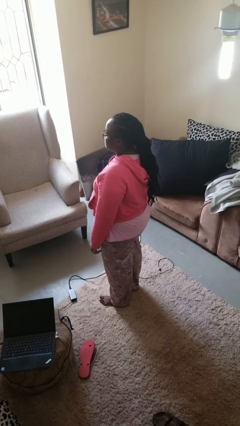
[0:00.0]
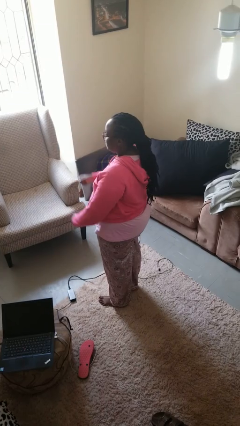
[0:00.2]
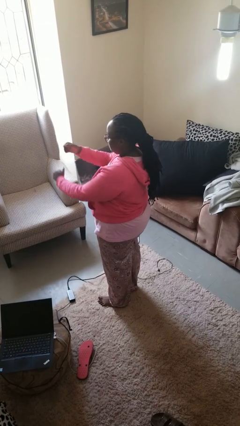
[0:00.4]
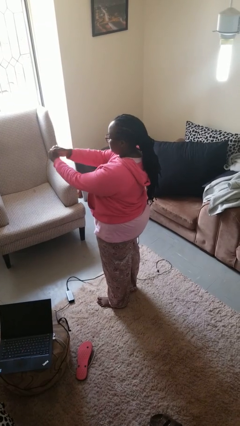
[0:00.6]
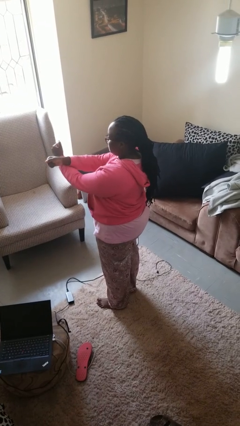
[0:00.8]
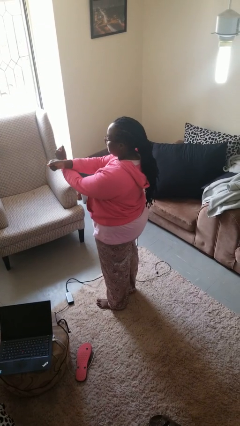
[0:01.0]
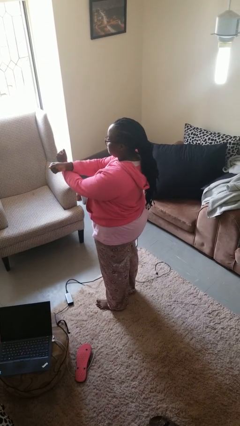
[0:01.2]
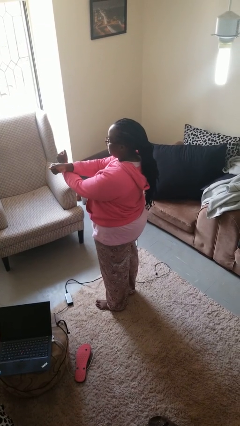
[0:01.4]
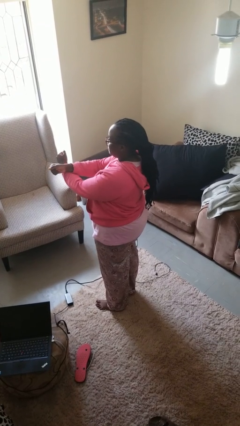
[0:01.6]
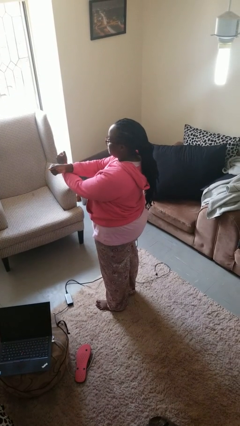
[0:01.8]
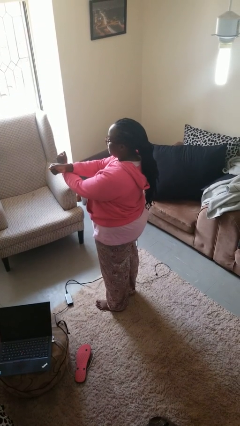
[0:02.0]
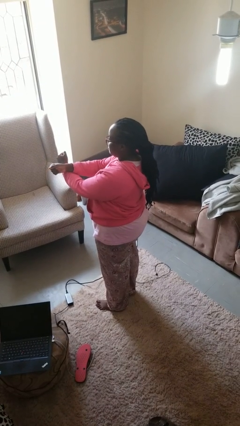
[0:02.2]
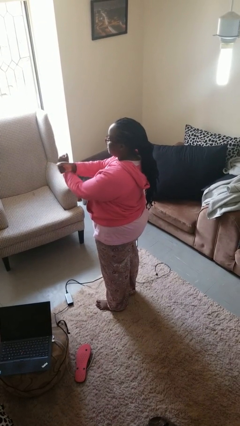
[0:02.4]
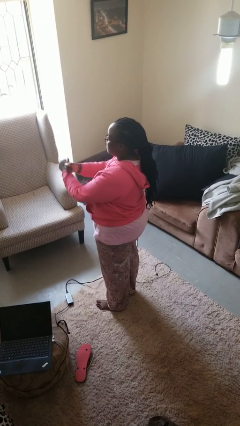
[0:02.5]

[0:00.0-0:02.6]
person gestures arms x

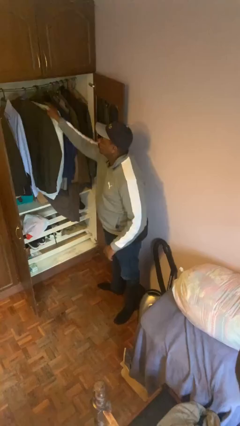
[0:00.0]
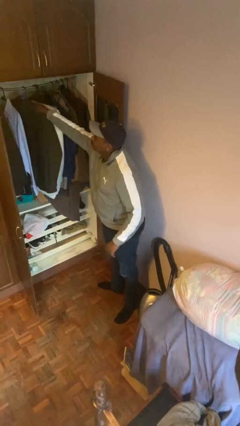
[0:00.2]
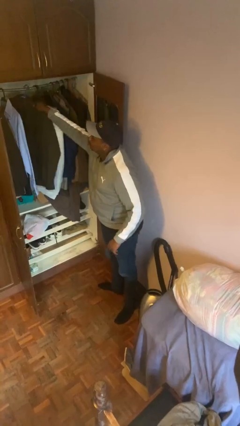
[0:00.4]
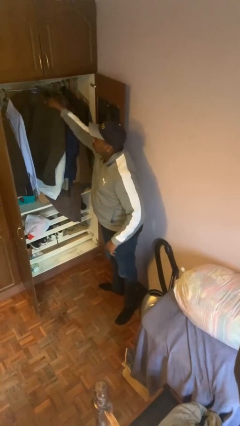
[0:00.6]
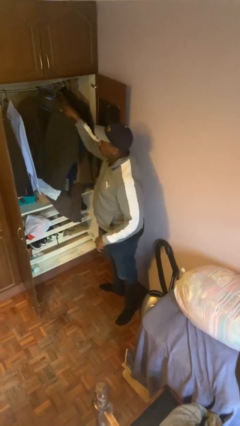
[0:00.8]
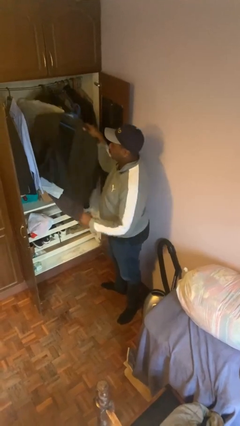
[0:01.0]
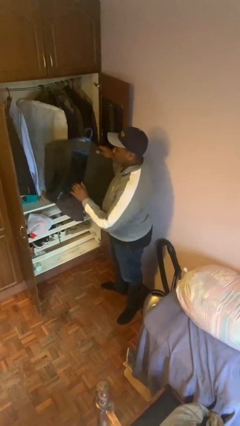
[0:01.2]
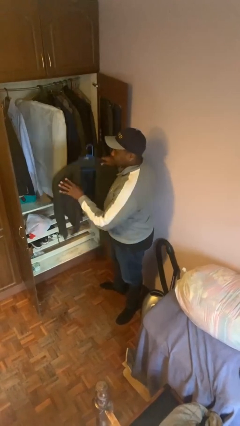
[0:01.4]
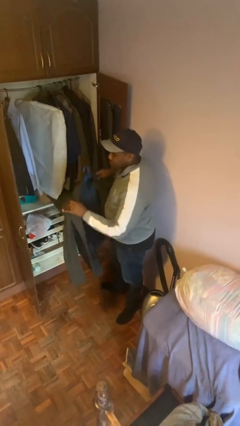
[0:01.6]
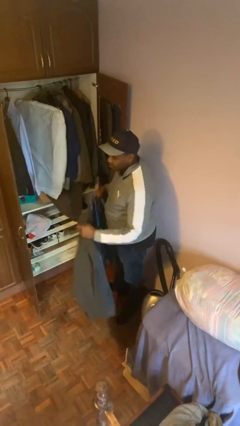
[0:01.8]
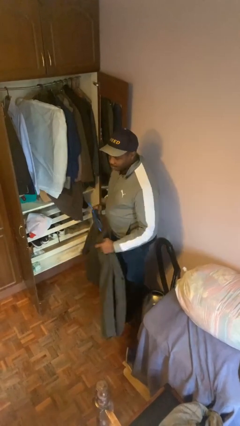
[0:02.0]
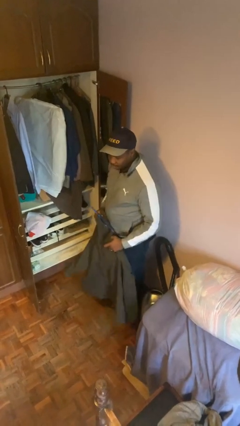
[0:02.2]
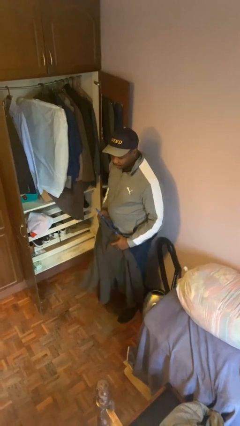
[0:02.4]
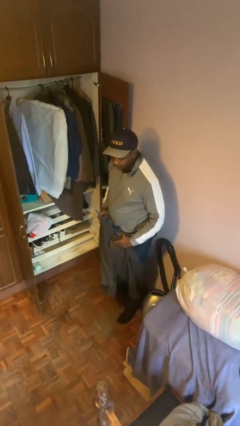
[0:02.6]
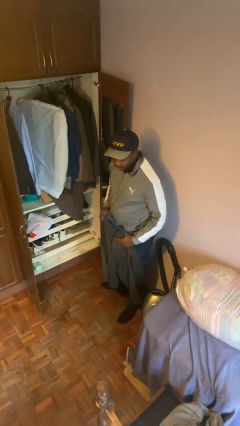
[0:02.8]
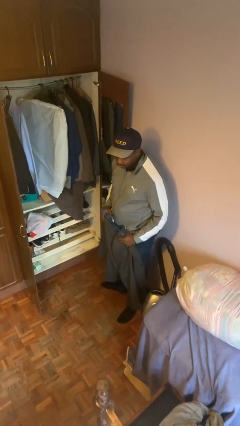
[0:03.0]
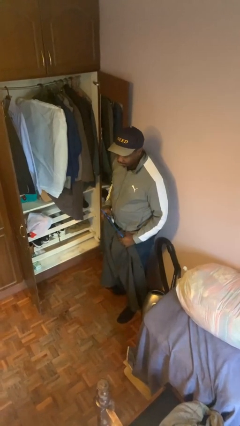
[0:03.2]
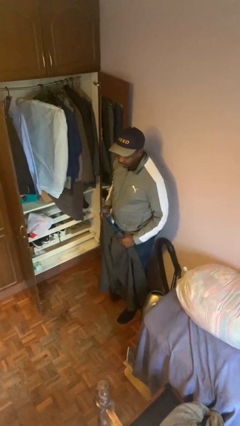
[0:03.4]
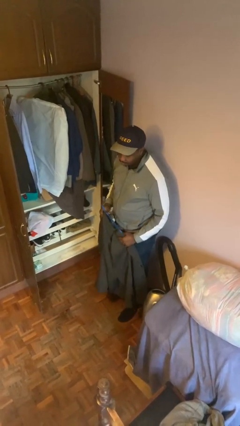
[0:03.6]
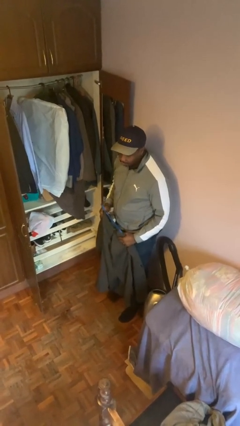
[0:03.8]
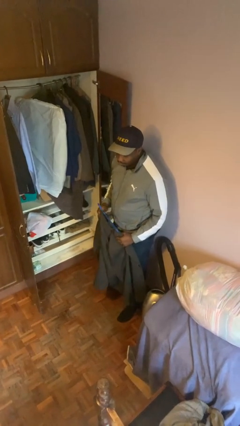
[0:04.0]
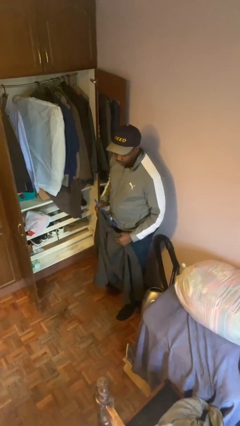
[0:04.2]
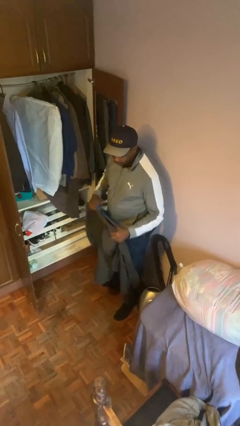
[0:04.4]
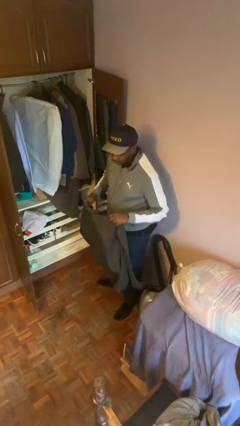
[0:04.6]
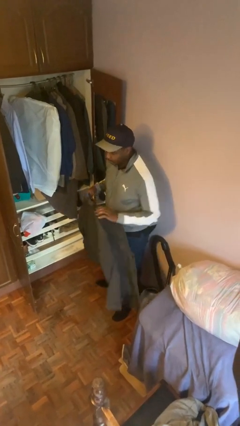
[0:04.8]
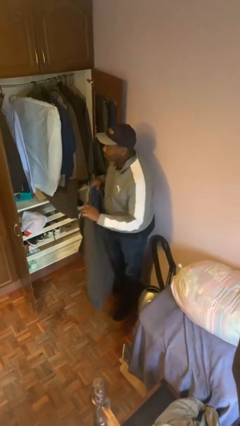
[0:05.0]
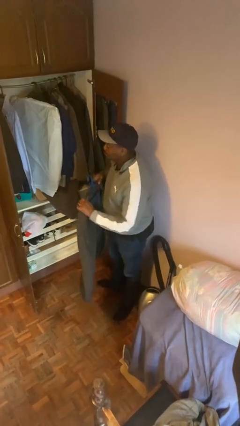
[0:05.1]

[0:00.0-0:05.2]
person takes clothes from closet

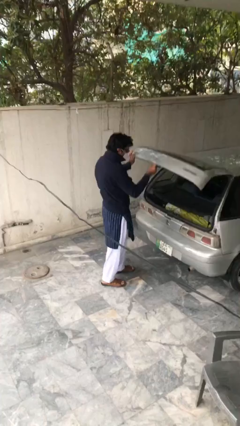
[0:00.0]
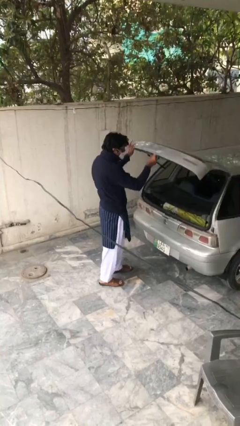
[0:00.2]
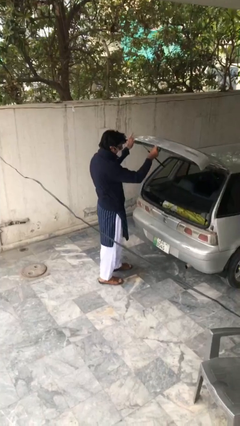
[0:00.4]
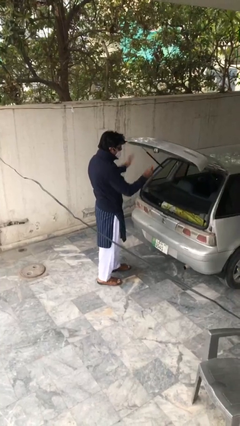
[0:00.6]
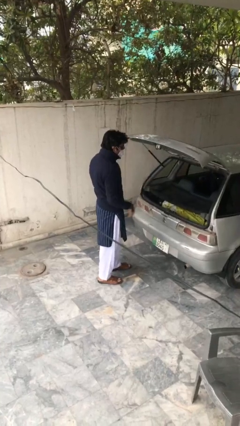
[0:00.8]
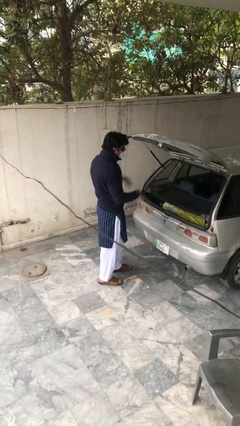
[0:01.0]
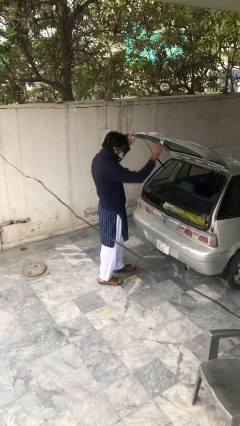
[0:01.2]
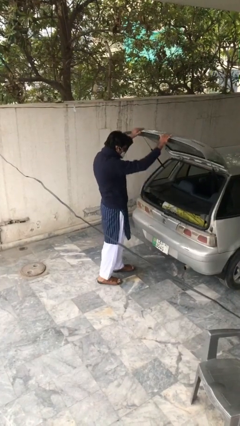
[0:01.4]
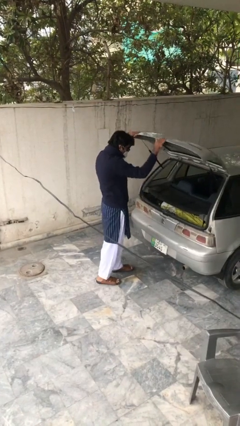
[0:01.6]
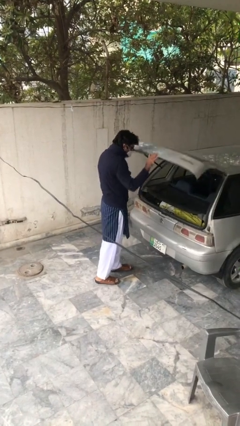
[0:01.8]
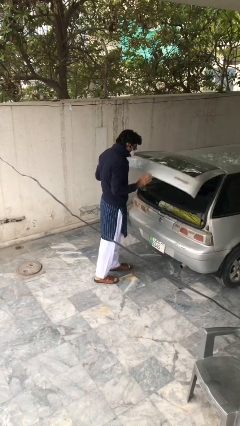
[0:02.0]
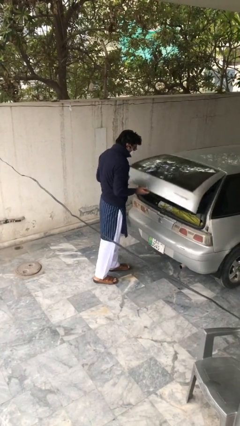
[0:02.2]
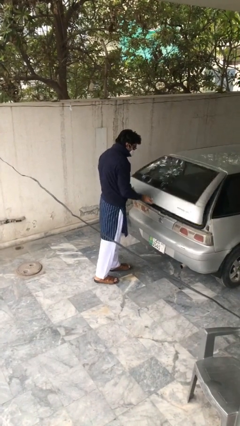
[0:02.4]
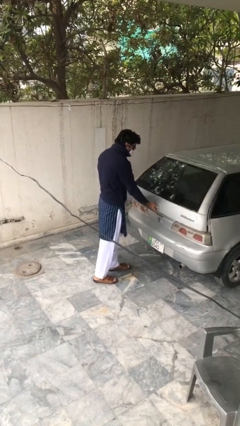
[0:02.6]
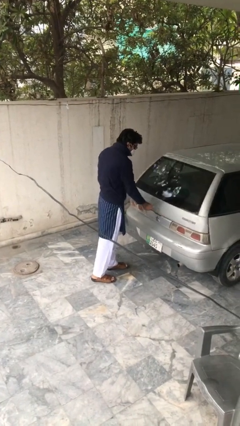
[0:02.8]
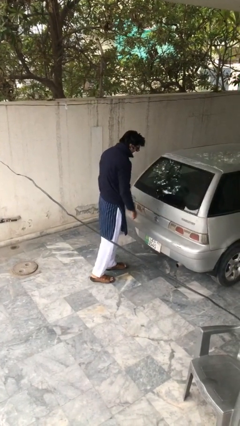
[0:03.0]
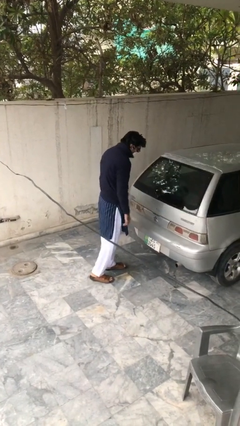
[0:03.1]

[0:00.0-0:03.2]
person closes car trunk

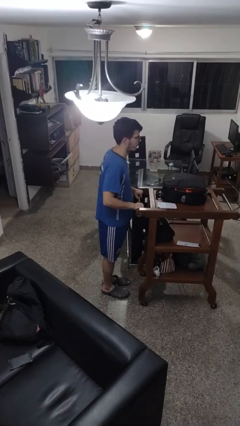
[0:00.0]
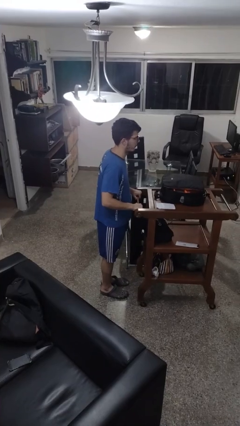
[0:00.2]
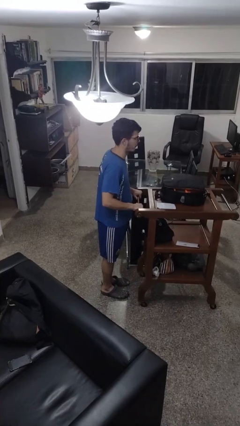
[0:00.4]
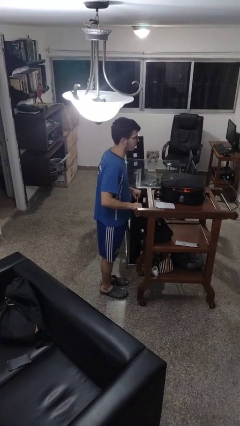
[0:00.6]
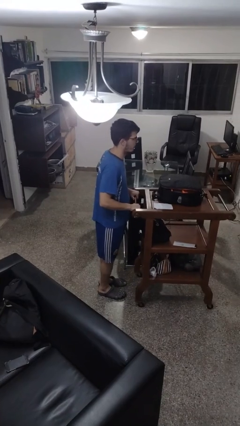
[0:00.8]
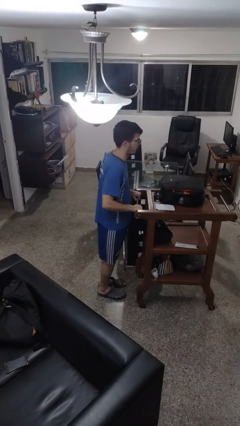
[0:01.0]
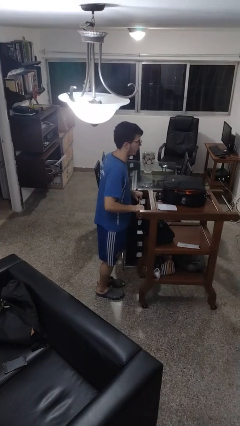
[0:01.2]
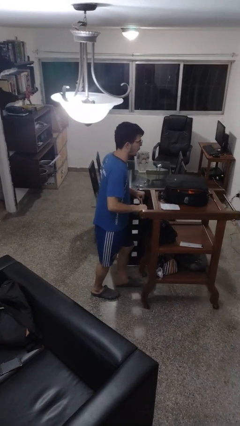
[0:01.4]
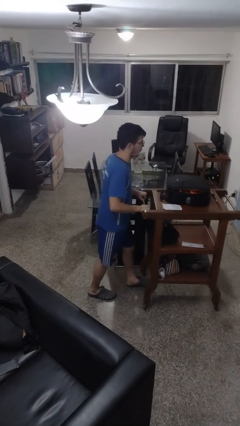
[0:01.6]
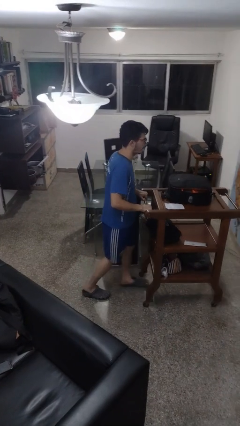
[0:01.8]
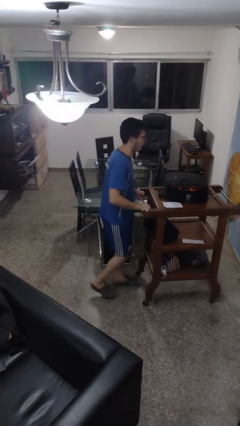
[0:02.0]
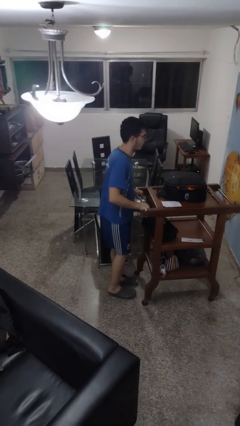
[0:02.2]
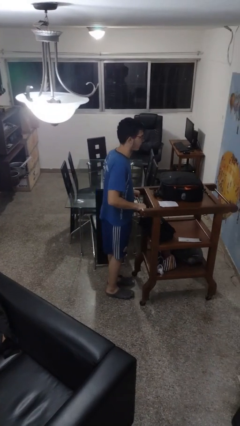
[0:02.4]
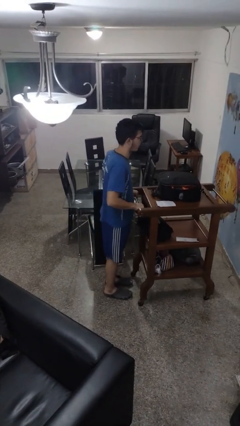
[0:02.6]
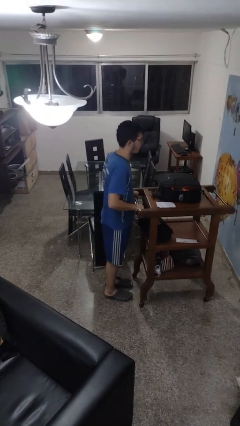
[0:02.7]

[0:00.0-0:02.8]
person pushes wheeled cart

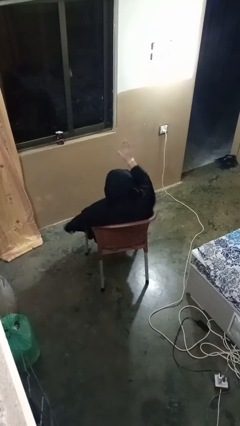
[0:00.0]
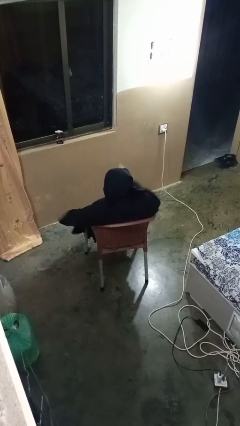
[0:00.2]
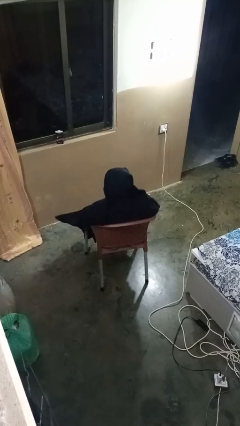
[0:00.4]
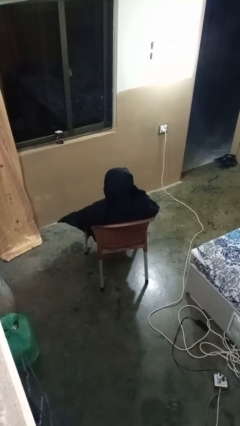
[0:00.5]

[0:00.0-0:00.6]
person gestures lower hand

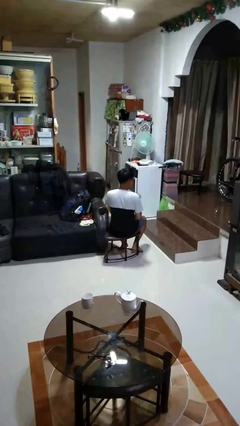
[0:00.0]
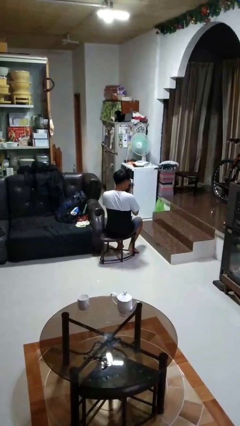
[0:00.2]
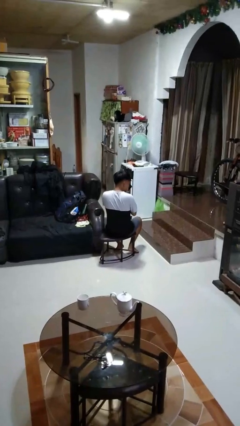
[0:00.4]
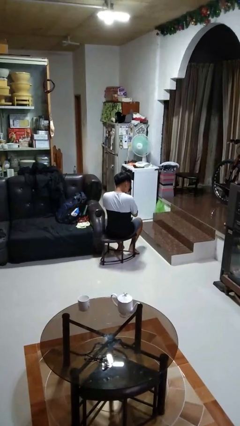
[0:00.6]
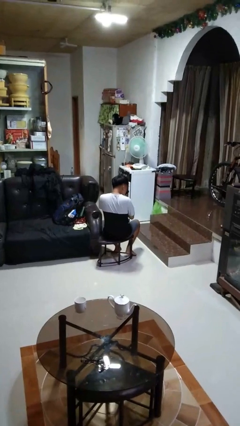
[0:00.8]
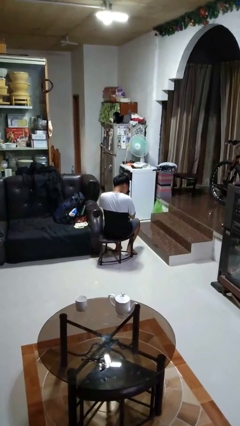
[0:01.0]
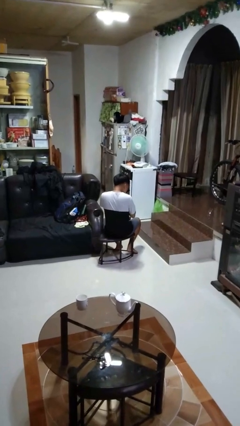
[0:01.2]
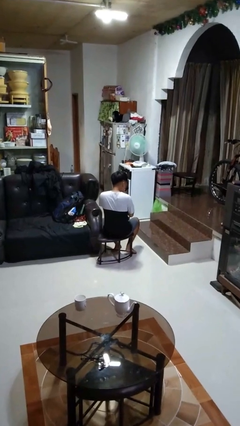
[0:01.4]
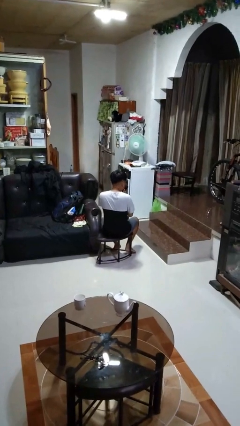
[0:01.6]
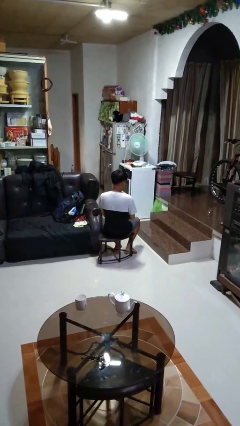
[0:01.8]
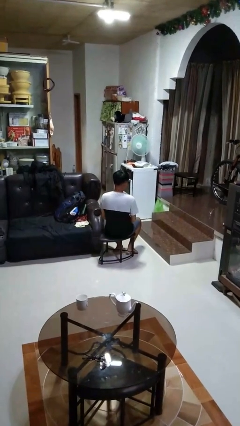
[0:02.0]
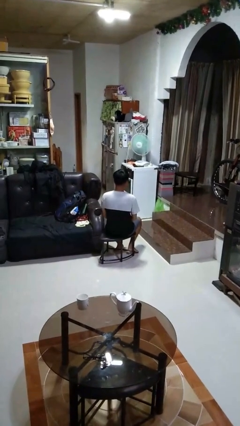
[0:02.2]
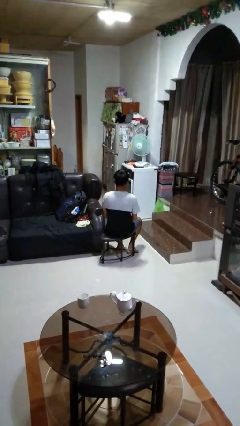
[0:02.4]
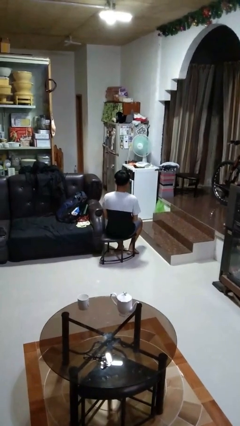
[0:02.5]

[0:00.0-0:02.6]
person blows nose

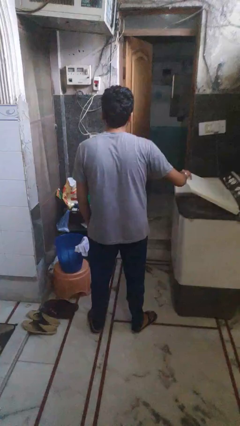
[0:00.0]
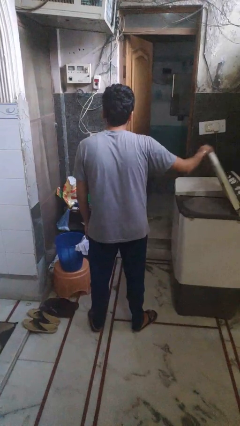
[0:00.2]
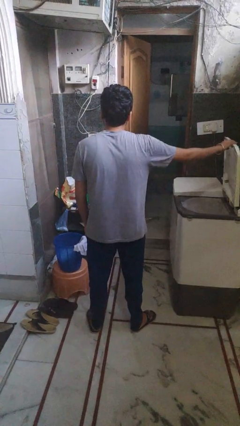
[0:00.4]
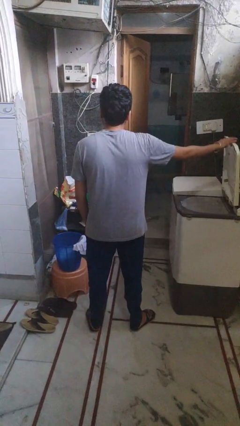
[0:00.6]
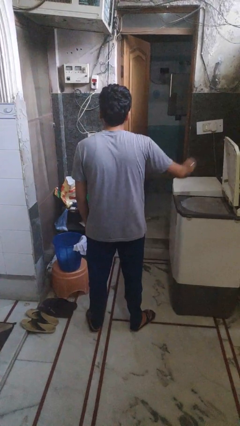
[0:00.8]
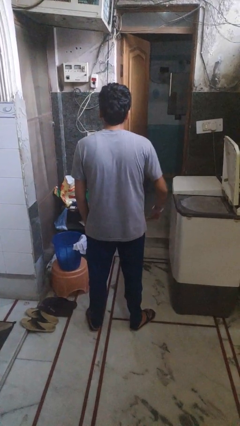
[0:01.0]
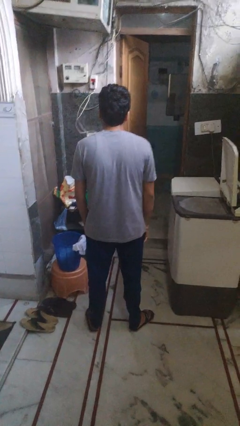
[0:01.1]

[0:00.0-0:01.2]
person opens clothes washer
